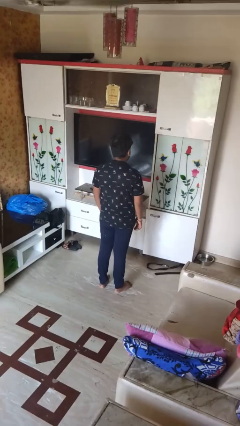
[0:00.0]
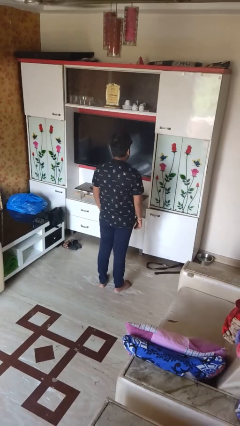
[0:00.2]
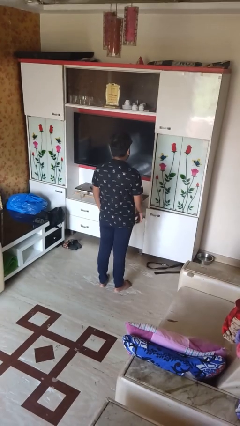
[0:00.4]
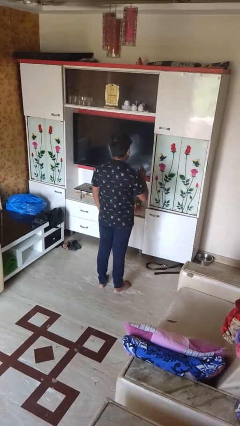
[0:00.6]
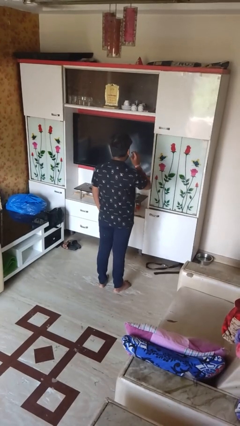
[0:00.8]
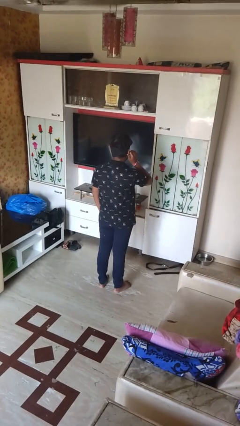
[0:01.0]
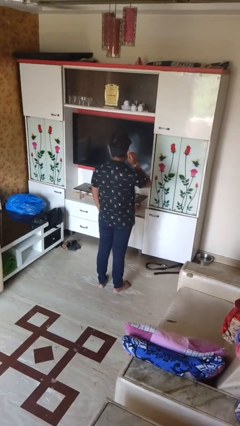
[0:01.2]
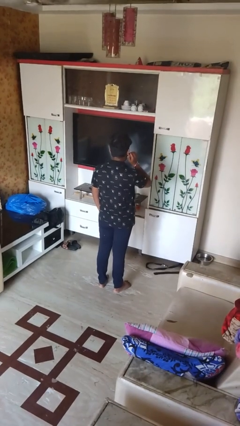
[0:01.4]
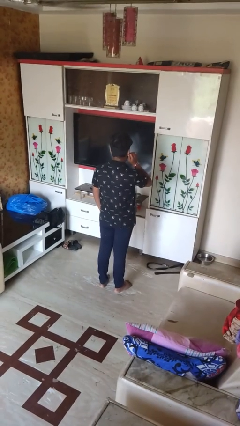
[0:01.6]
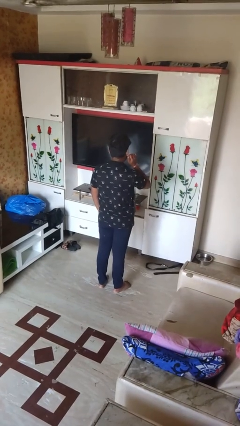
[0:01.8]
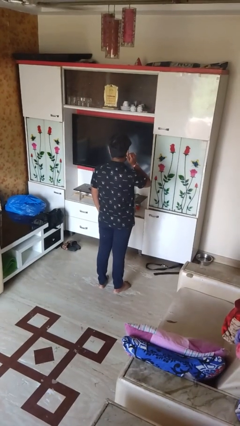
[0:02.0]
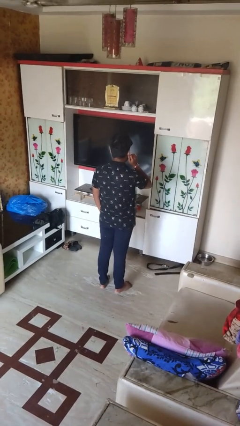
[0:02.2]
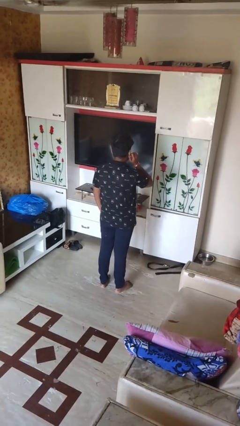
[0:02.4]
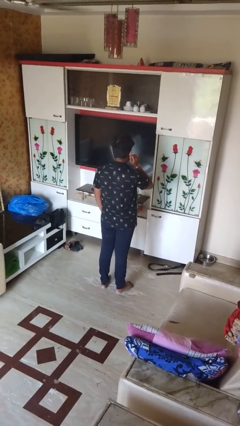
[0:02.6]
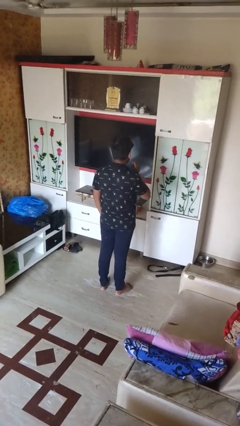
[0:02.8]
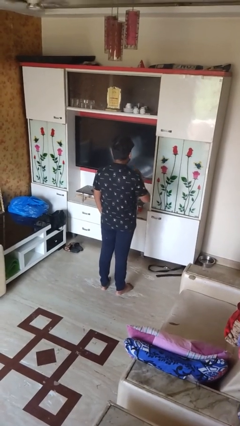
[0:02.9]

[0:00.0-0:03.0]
person touches earlobe

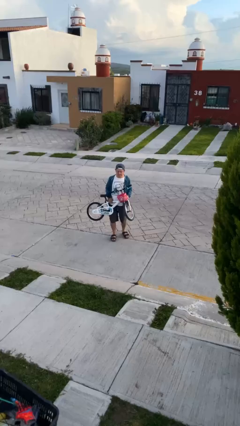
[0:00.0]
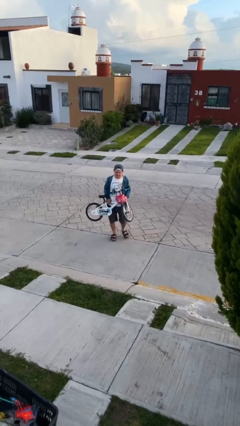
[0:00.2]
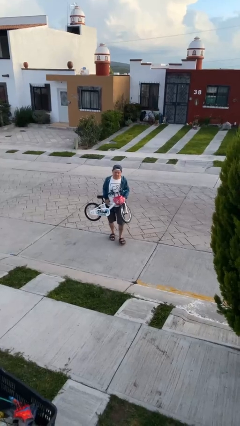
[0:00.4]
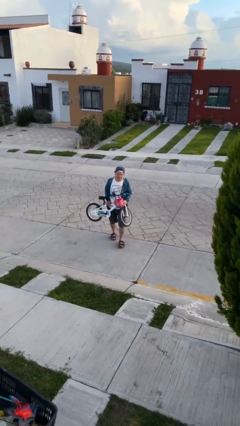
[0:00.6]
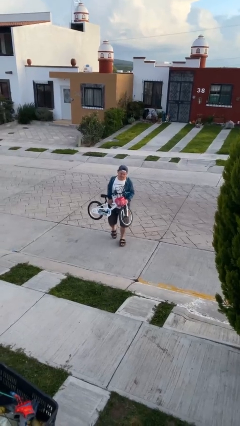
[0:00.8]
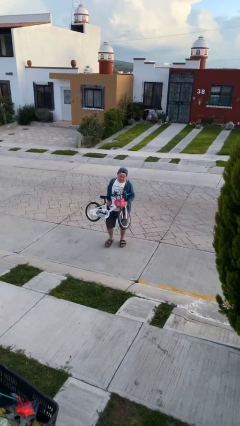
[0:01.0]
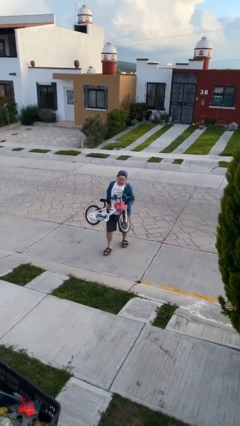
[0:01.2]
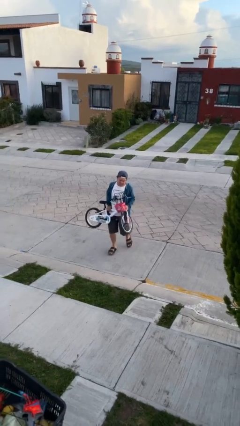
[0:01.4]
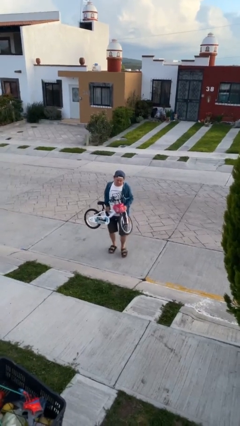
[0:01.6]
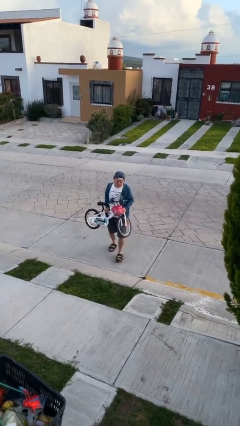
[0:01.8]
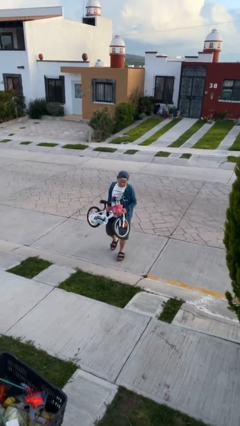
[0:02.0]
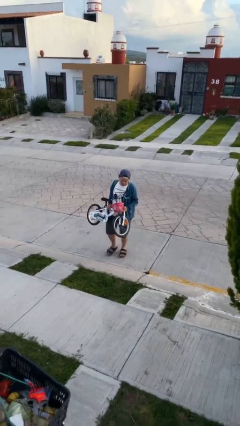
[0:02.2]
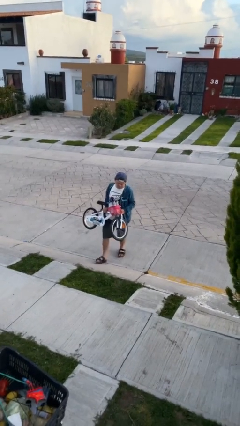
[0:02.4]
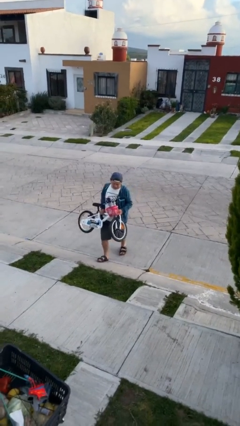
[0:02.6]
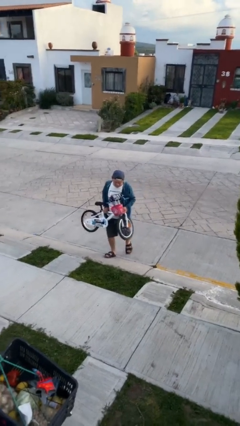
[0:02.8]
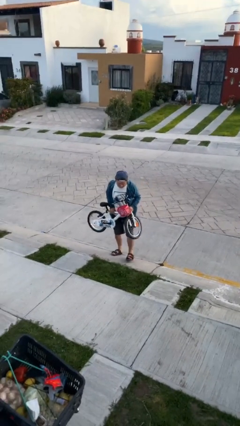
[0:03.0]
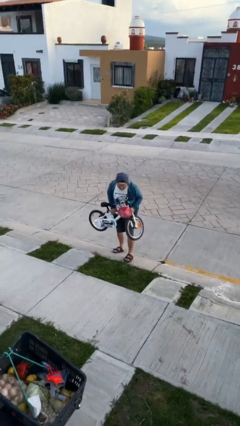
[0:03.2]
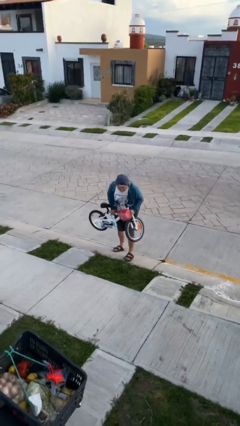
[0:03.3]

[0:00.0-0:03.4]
person carries heavy object

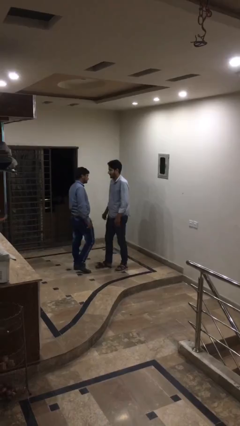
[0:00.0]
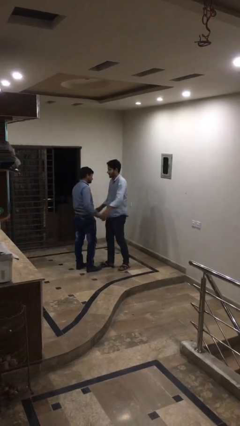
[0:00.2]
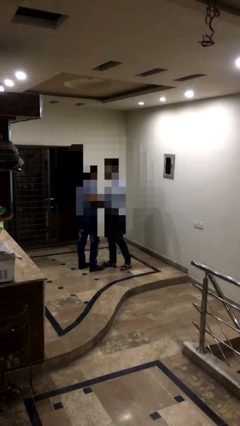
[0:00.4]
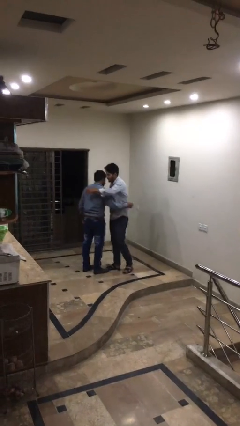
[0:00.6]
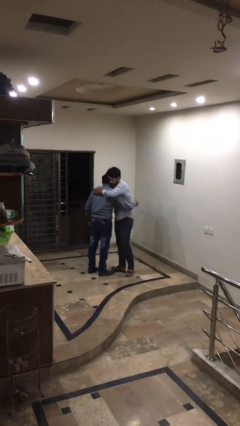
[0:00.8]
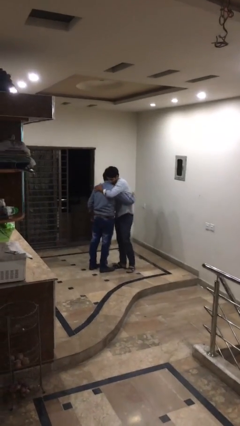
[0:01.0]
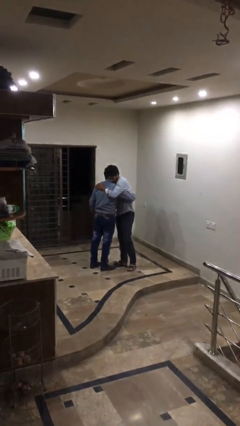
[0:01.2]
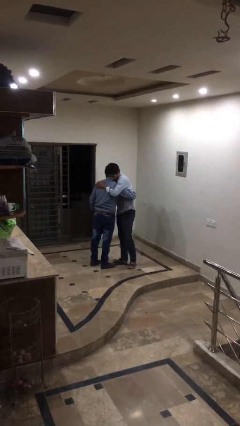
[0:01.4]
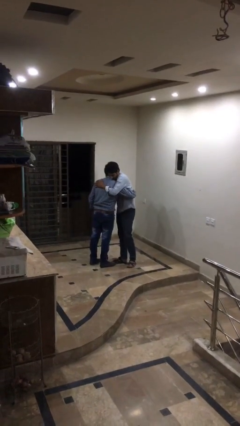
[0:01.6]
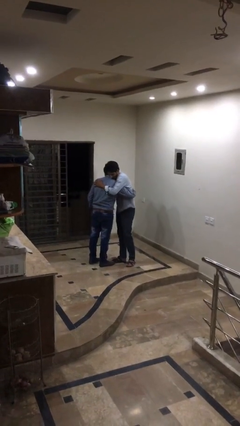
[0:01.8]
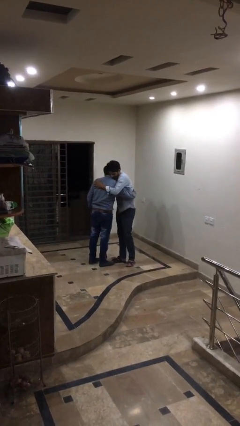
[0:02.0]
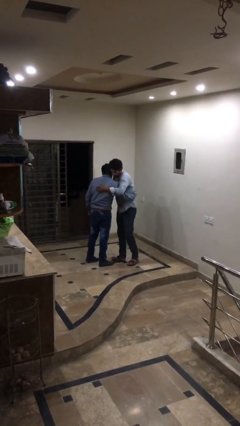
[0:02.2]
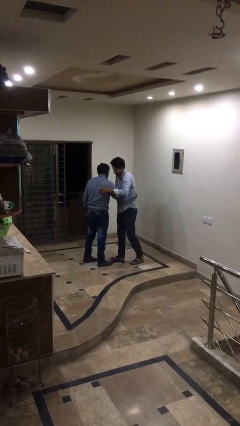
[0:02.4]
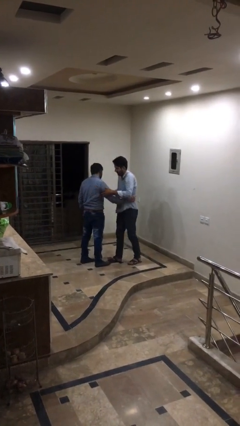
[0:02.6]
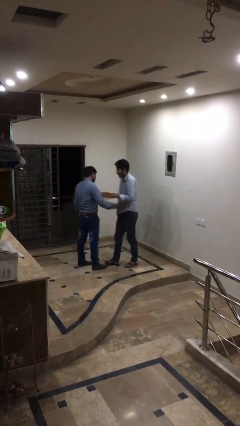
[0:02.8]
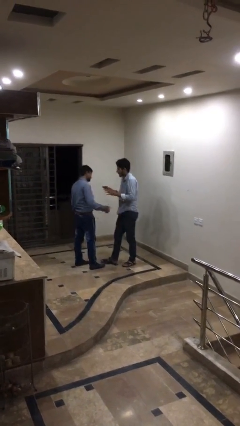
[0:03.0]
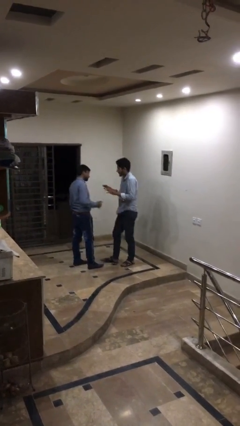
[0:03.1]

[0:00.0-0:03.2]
person embraces person

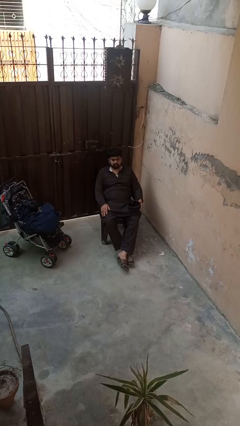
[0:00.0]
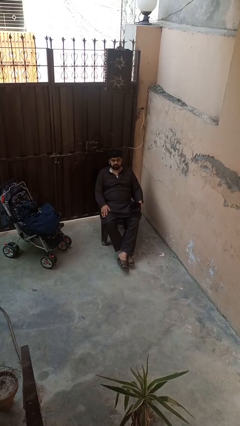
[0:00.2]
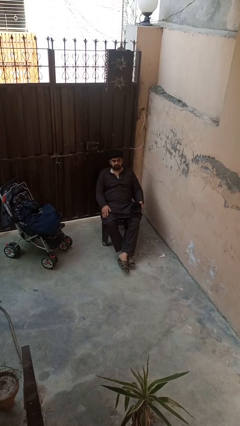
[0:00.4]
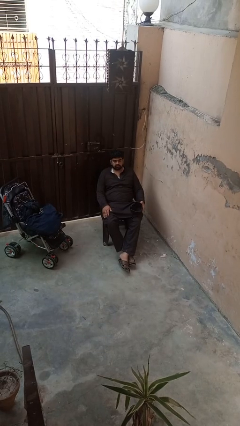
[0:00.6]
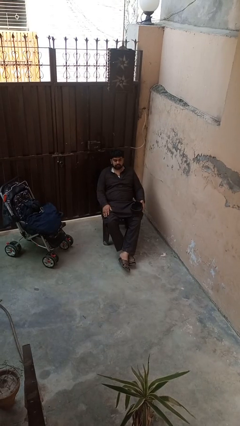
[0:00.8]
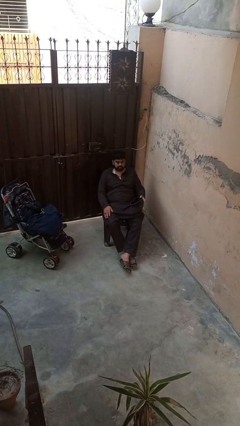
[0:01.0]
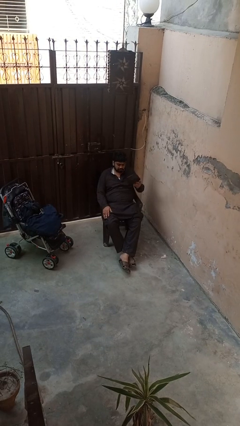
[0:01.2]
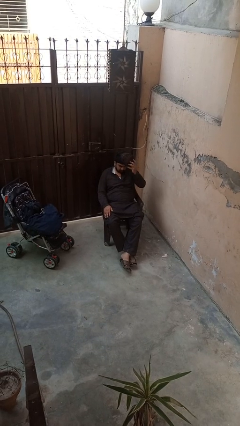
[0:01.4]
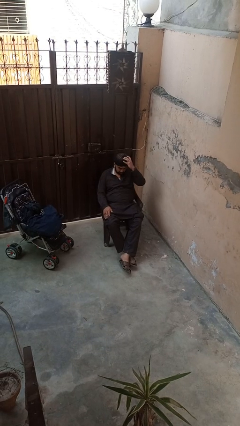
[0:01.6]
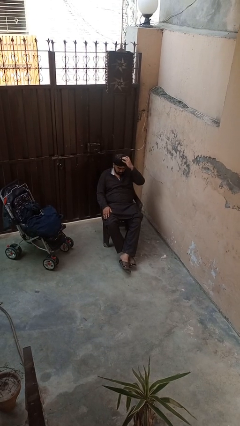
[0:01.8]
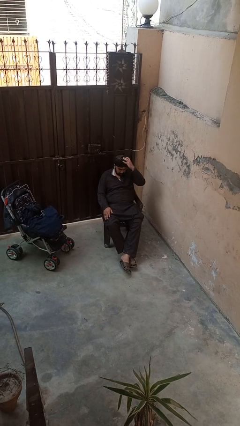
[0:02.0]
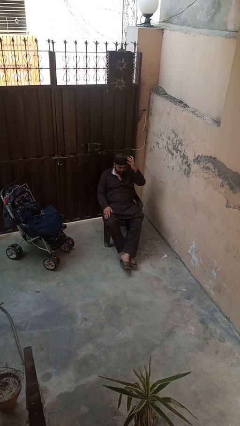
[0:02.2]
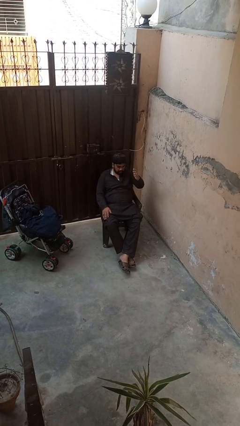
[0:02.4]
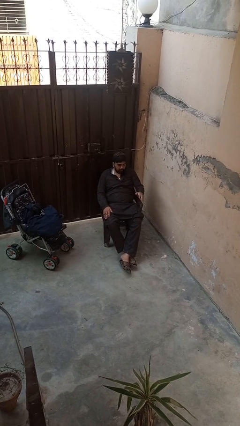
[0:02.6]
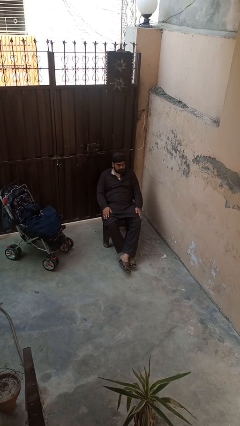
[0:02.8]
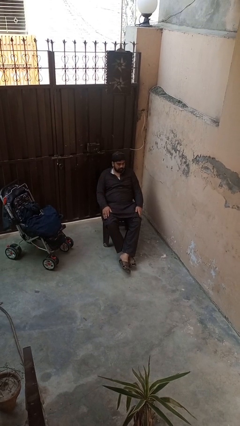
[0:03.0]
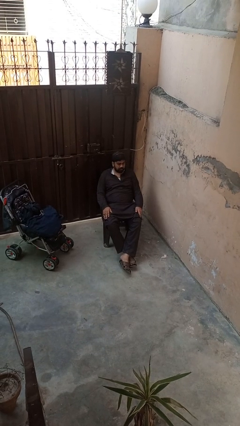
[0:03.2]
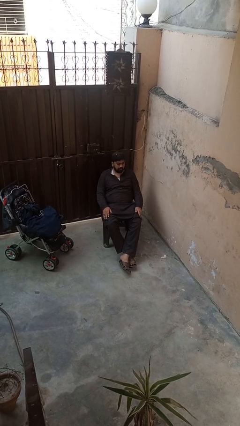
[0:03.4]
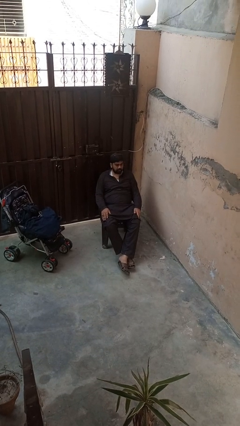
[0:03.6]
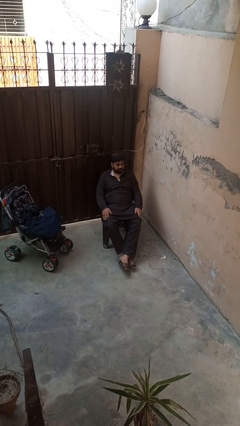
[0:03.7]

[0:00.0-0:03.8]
person puts on hat

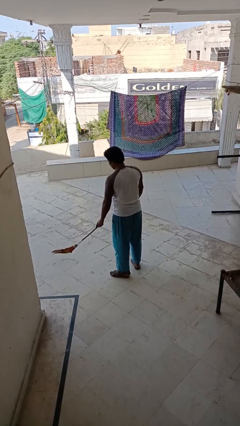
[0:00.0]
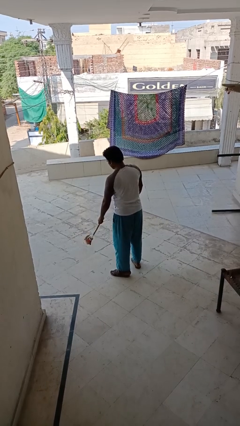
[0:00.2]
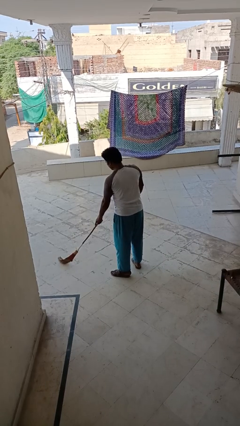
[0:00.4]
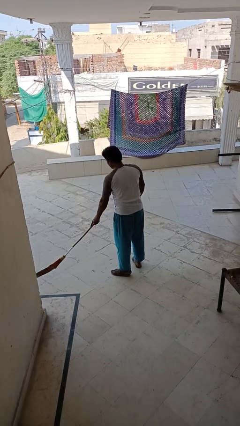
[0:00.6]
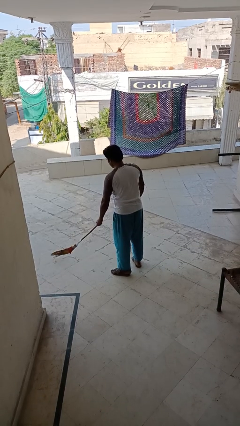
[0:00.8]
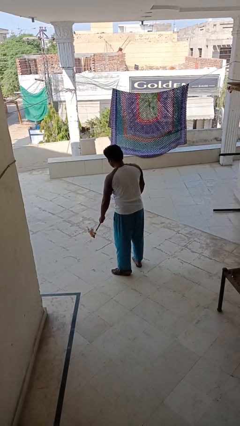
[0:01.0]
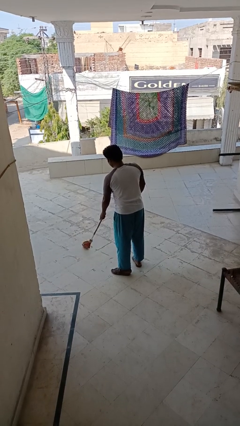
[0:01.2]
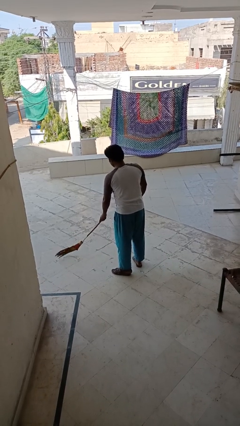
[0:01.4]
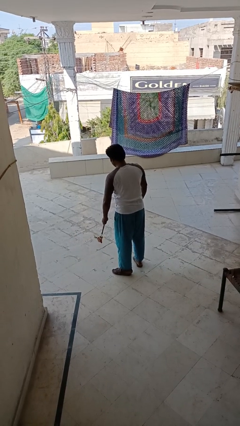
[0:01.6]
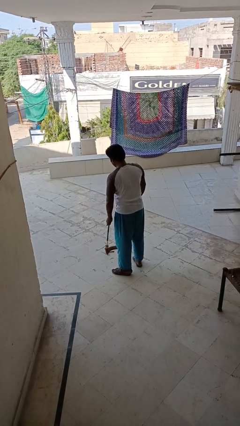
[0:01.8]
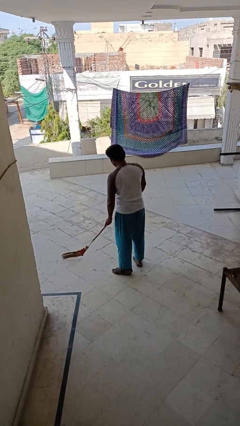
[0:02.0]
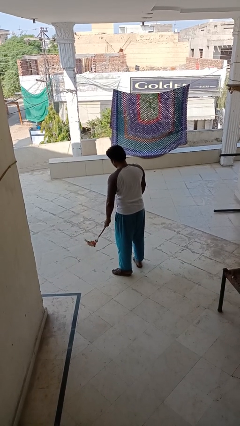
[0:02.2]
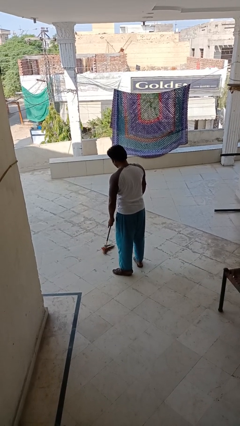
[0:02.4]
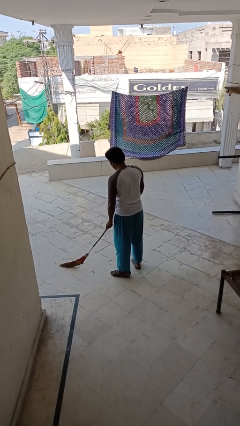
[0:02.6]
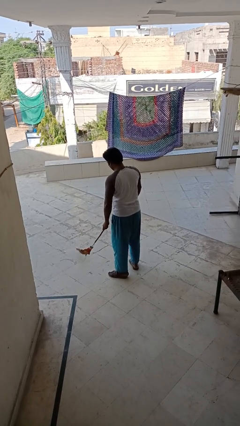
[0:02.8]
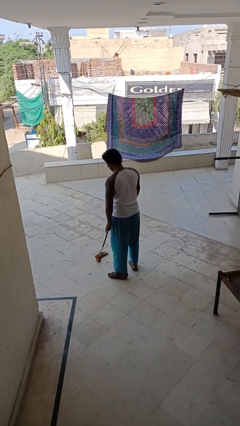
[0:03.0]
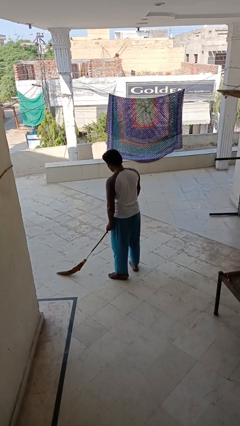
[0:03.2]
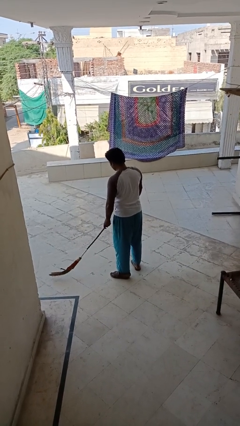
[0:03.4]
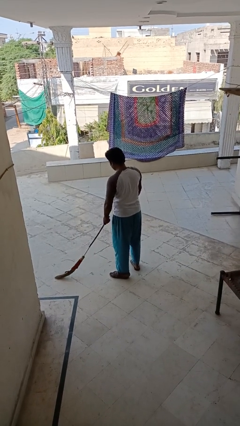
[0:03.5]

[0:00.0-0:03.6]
person sweeps floor

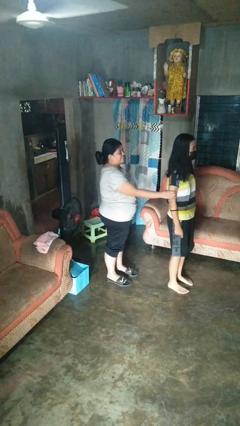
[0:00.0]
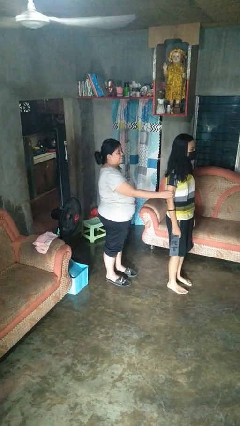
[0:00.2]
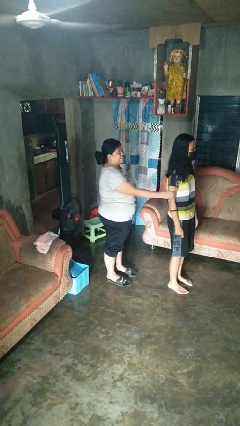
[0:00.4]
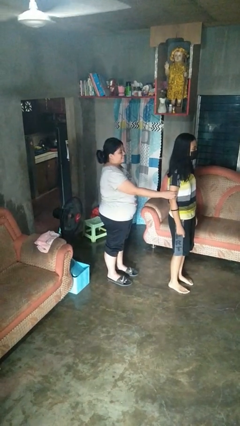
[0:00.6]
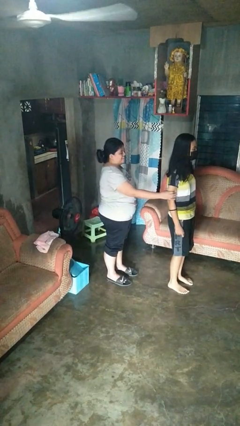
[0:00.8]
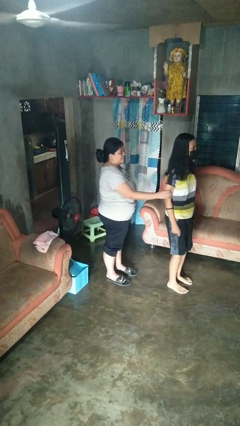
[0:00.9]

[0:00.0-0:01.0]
person spins person around
